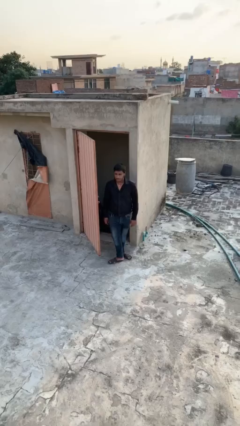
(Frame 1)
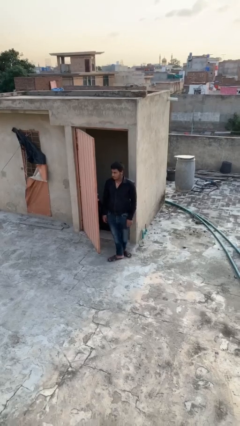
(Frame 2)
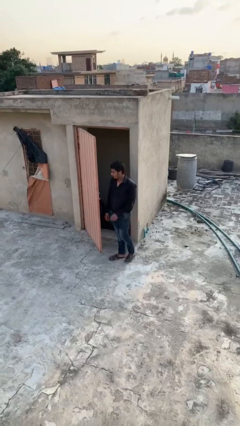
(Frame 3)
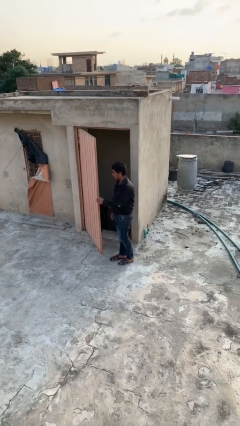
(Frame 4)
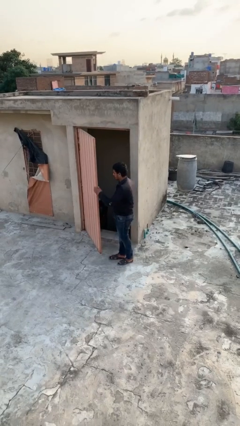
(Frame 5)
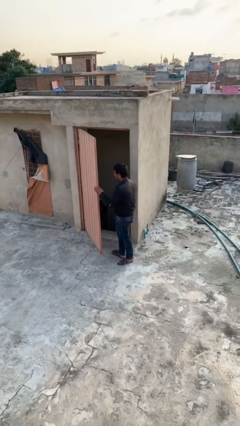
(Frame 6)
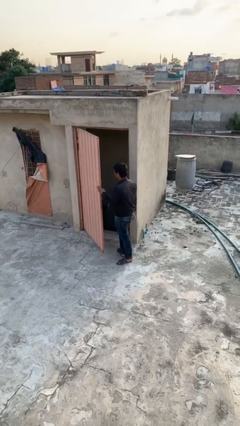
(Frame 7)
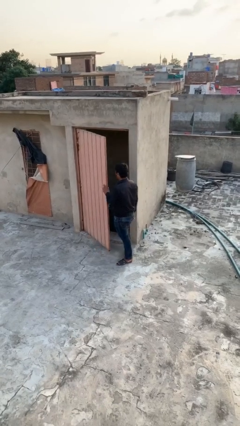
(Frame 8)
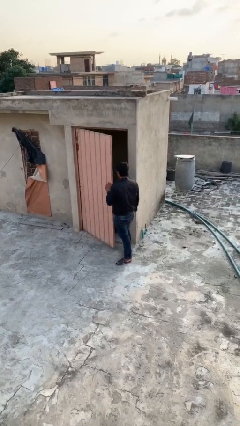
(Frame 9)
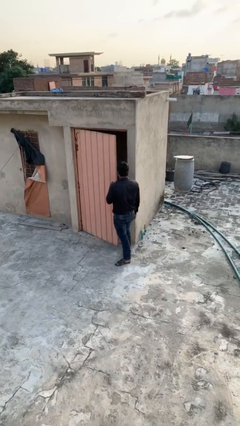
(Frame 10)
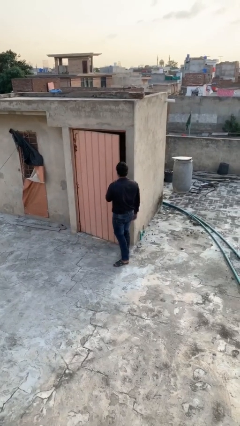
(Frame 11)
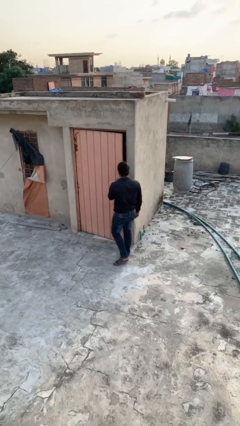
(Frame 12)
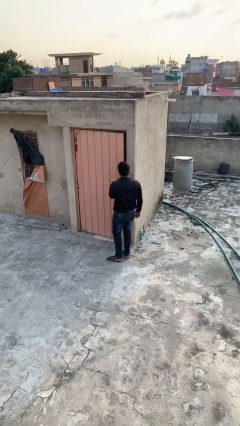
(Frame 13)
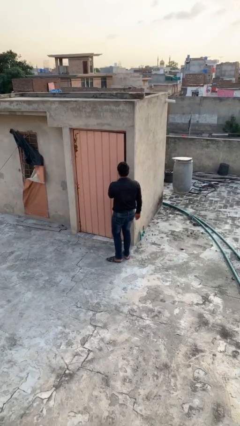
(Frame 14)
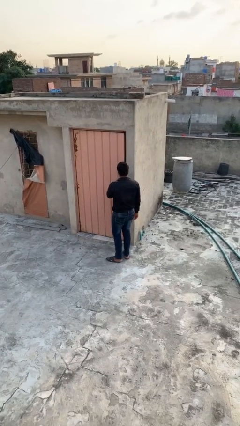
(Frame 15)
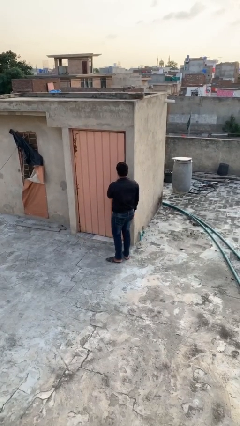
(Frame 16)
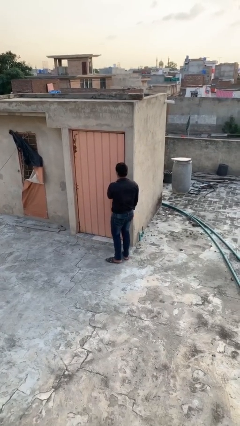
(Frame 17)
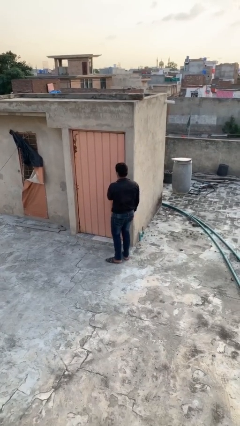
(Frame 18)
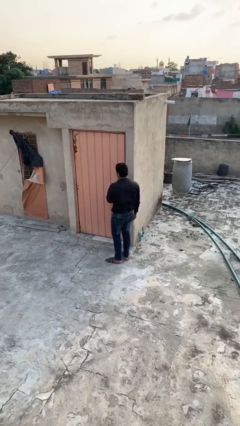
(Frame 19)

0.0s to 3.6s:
person closes facility door

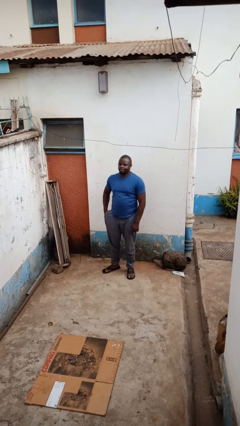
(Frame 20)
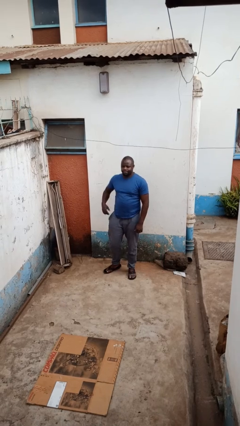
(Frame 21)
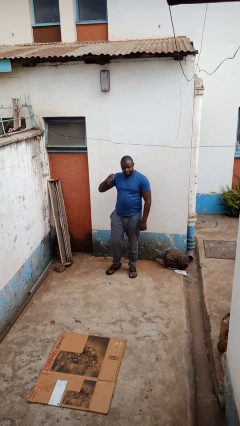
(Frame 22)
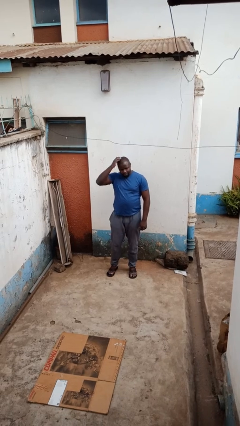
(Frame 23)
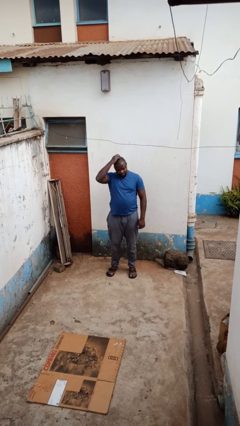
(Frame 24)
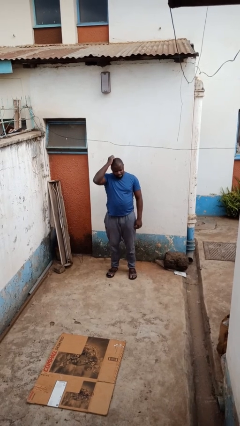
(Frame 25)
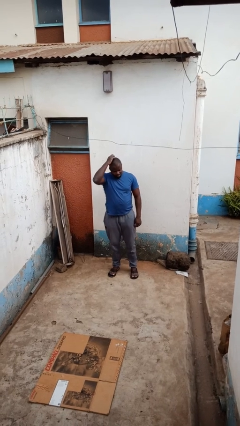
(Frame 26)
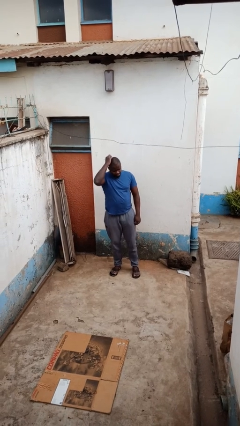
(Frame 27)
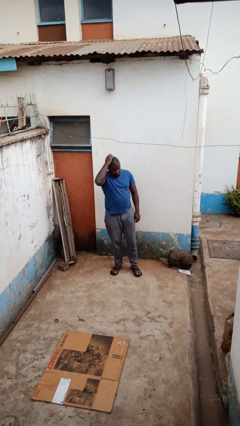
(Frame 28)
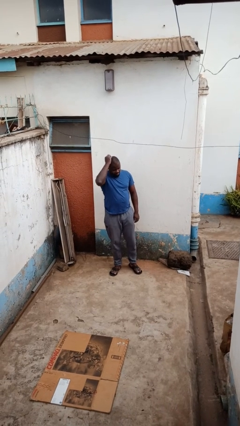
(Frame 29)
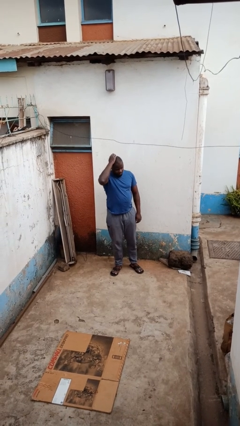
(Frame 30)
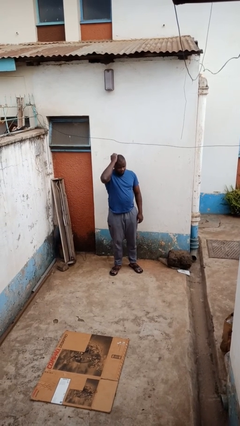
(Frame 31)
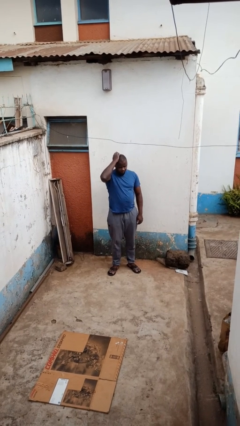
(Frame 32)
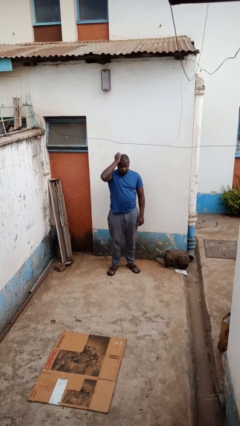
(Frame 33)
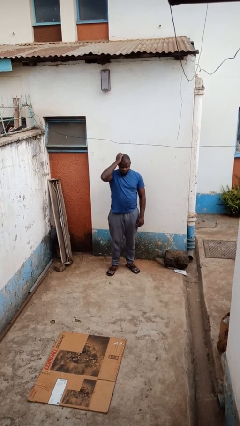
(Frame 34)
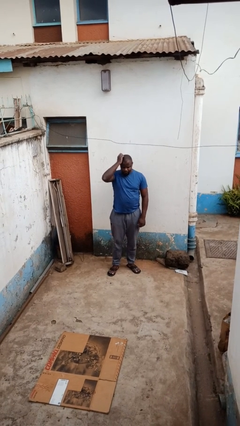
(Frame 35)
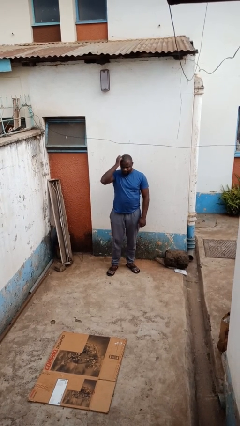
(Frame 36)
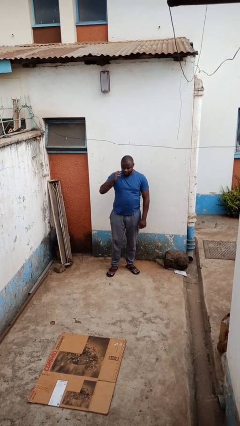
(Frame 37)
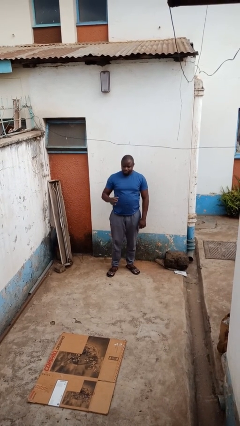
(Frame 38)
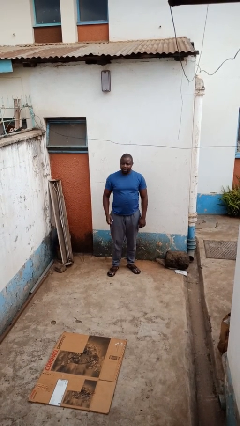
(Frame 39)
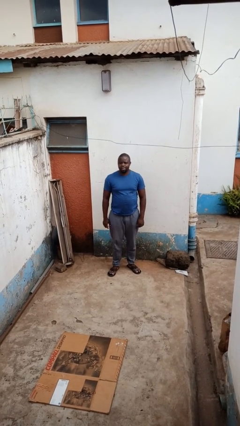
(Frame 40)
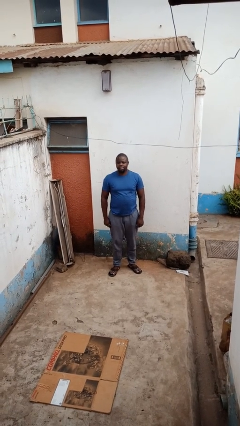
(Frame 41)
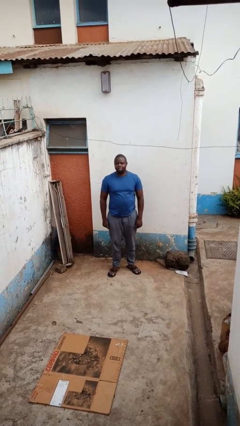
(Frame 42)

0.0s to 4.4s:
person scratches face

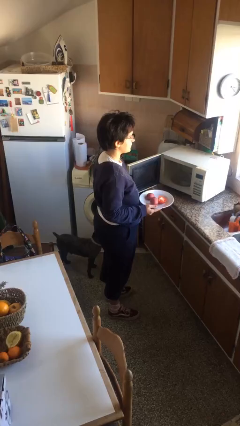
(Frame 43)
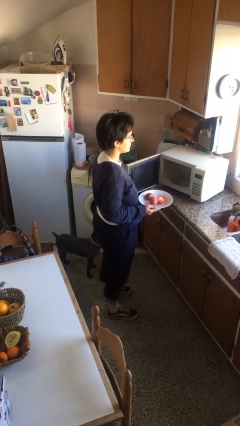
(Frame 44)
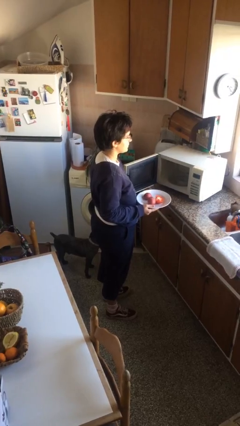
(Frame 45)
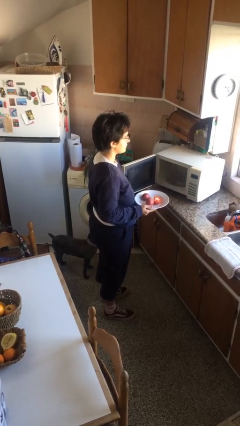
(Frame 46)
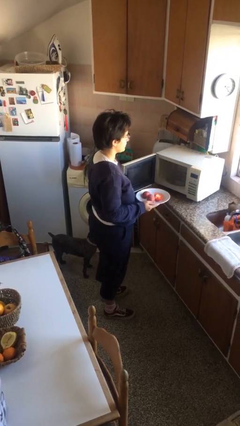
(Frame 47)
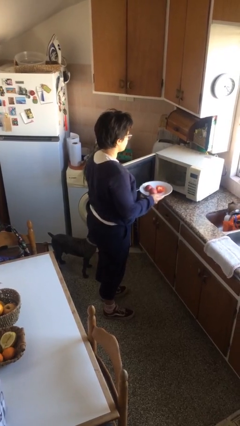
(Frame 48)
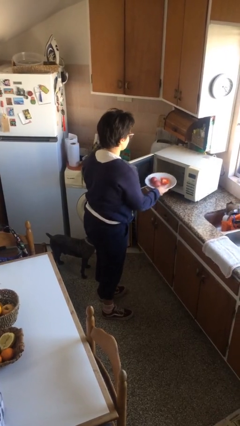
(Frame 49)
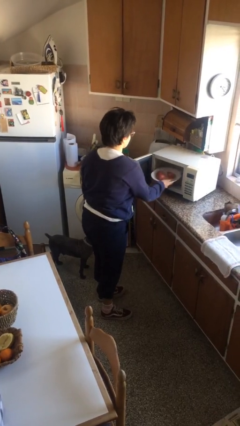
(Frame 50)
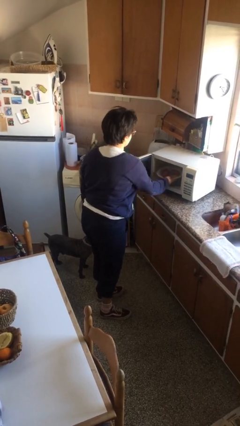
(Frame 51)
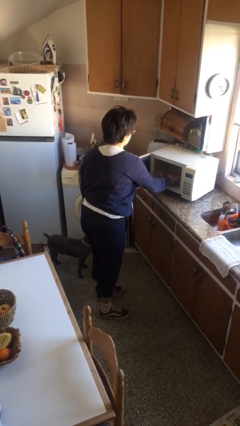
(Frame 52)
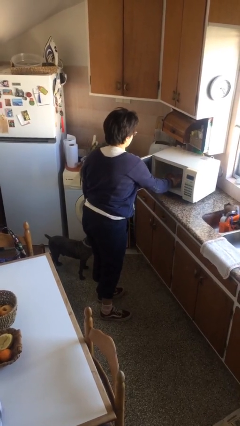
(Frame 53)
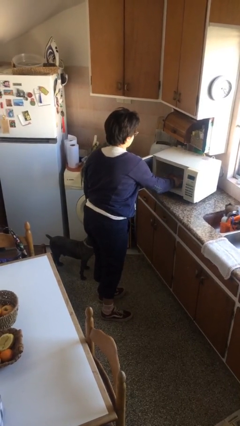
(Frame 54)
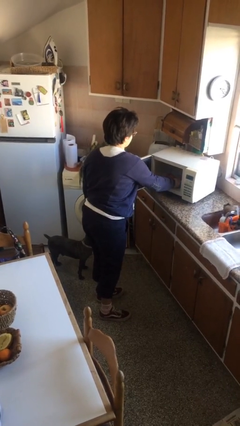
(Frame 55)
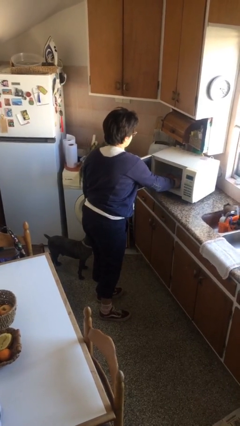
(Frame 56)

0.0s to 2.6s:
person puts object into microwave

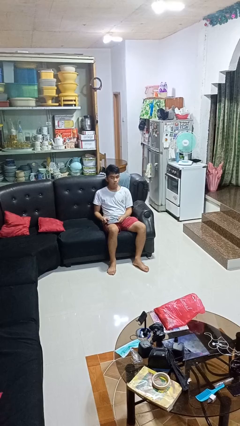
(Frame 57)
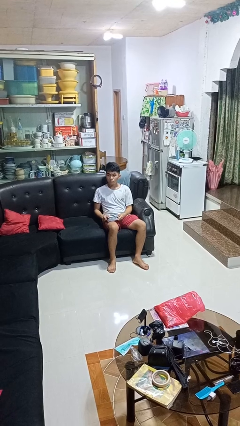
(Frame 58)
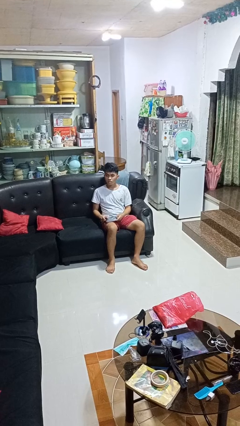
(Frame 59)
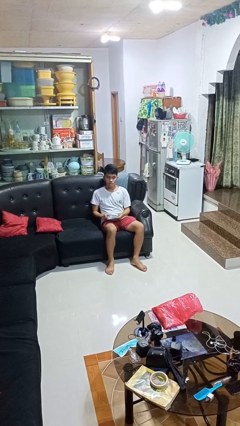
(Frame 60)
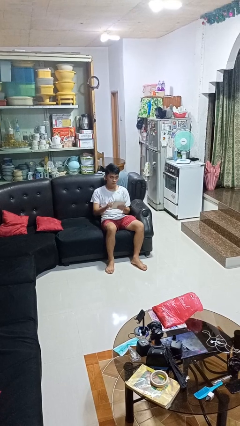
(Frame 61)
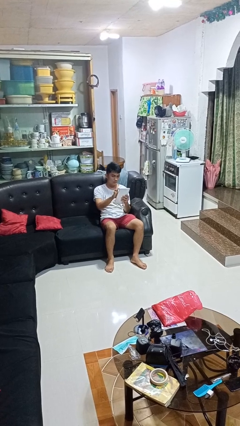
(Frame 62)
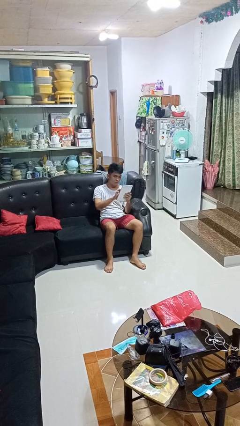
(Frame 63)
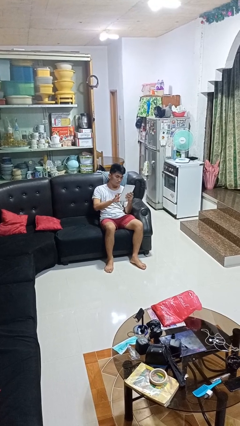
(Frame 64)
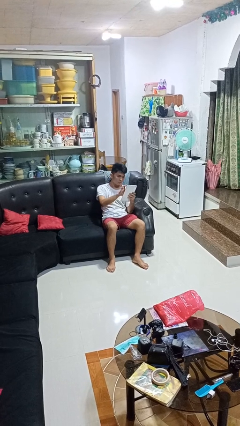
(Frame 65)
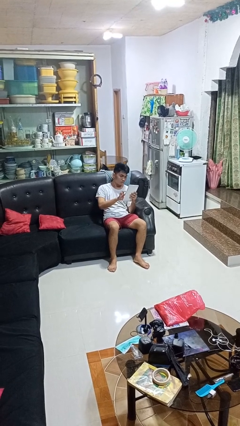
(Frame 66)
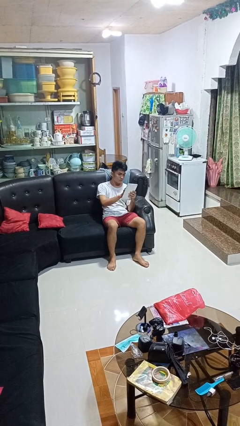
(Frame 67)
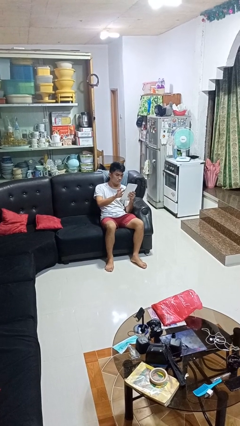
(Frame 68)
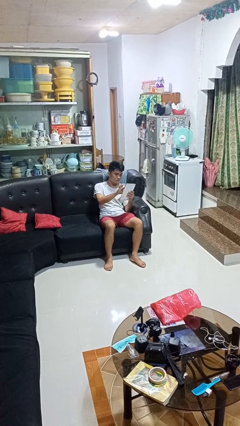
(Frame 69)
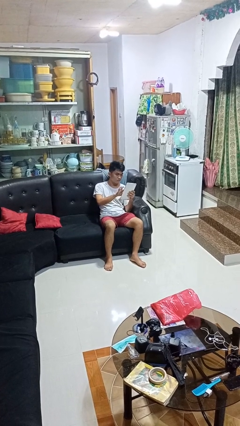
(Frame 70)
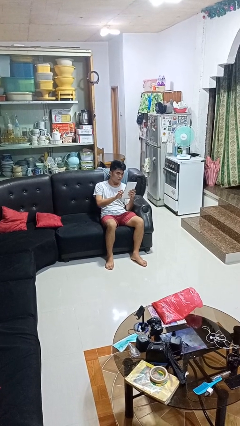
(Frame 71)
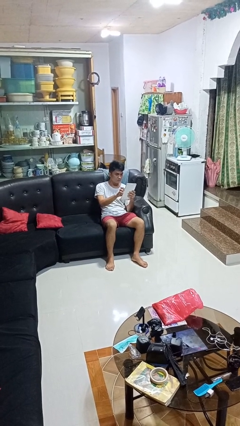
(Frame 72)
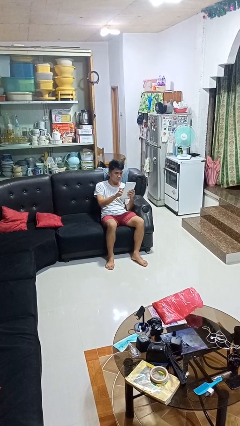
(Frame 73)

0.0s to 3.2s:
person interacts with tablet

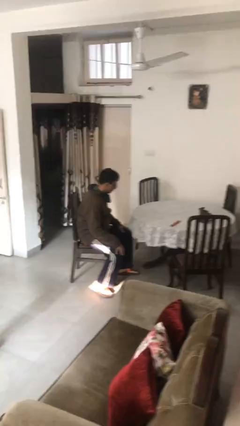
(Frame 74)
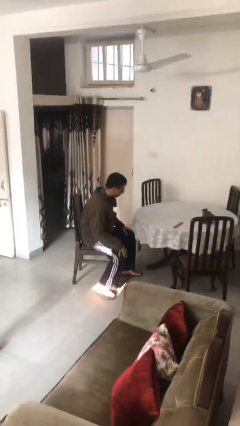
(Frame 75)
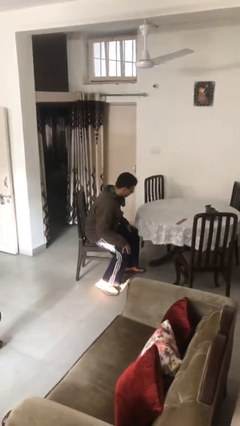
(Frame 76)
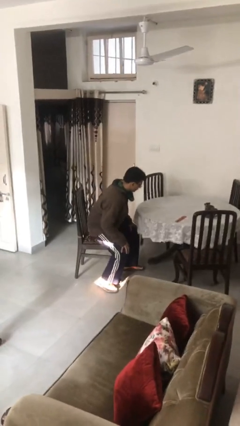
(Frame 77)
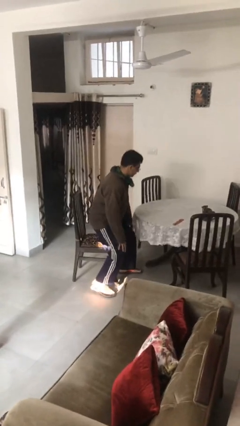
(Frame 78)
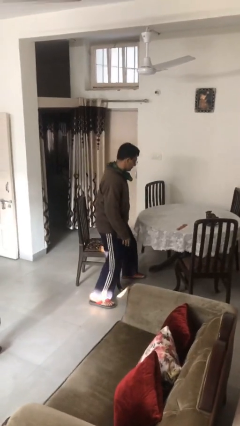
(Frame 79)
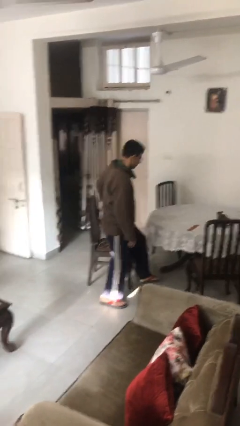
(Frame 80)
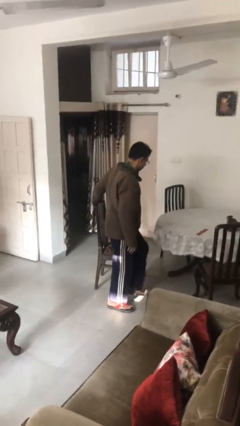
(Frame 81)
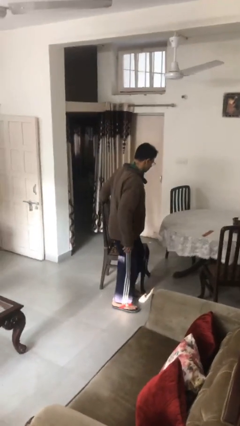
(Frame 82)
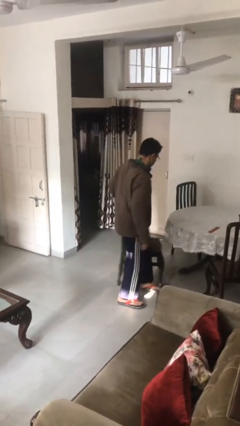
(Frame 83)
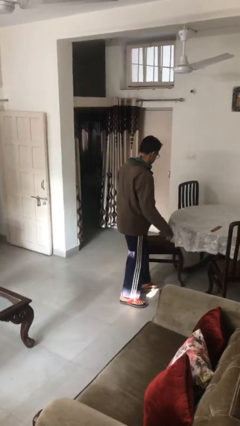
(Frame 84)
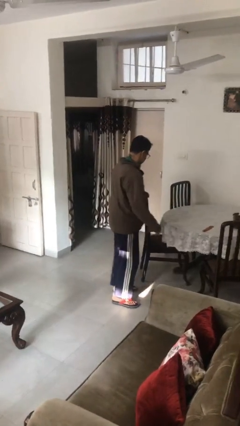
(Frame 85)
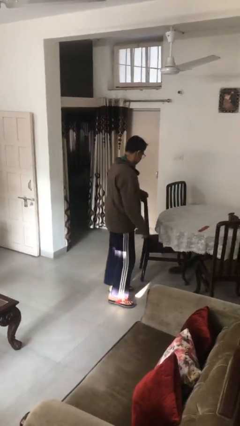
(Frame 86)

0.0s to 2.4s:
person stands up

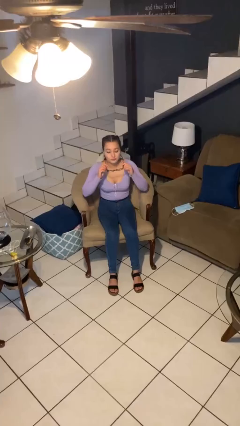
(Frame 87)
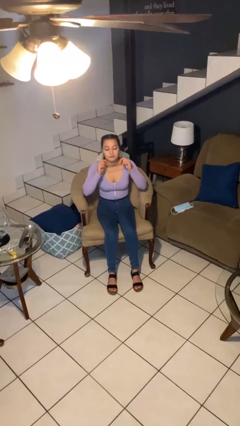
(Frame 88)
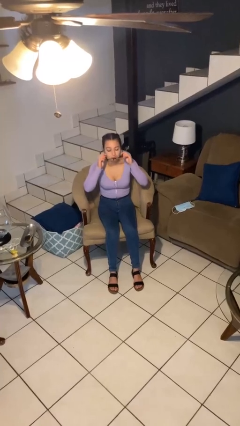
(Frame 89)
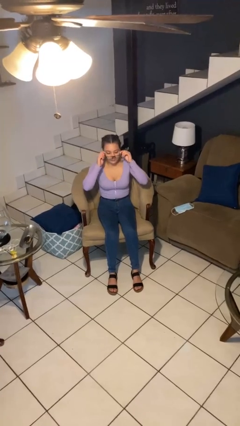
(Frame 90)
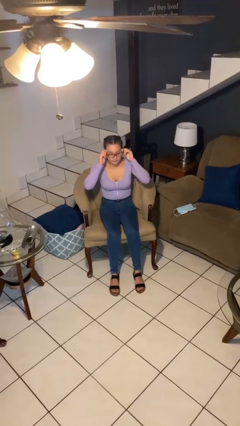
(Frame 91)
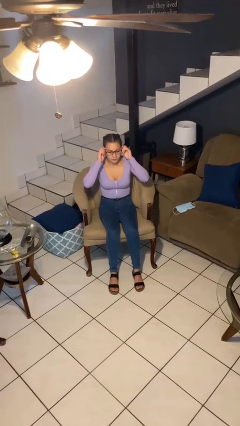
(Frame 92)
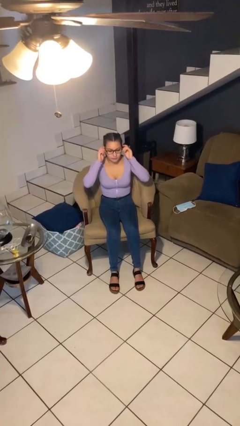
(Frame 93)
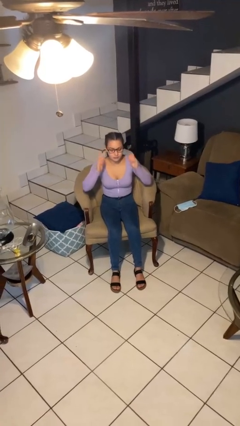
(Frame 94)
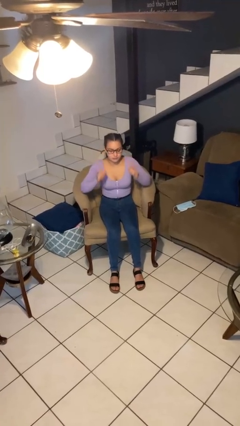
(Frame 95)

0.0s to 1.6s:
person puts on glasses
